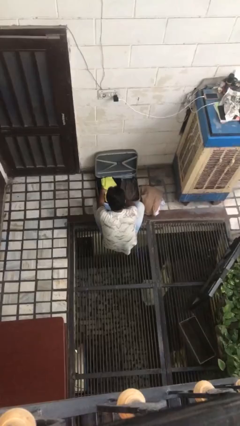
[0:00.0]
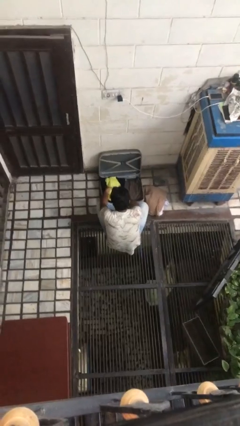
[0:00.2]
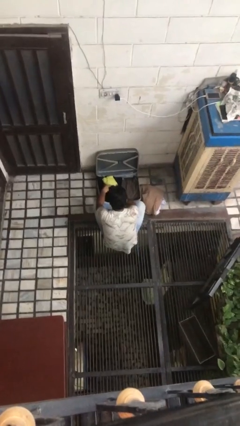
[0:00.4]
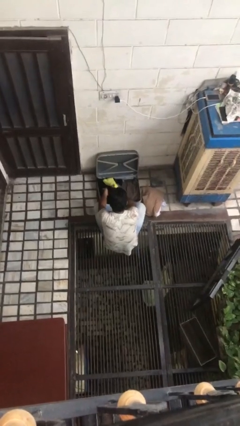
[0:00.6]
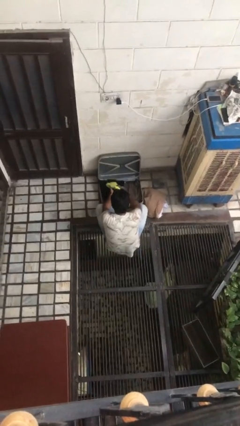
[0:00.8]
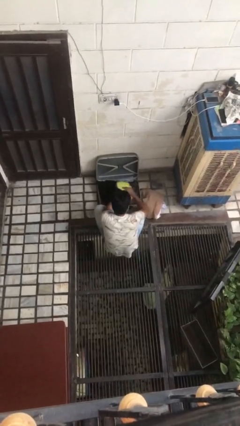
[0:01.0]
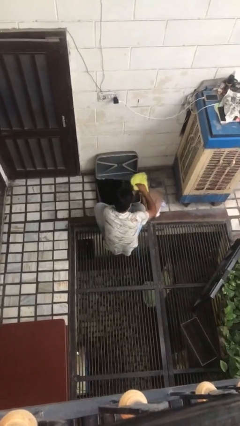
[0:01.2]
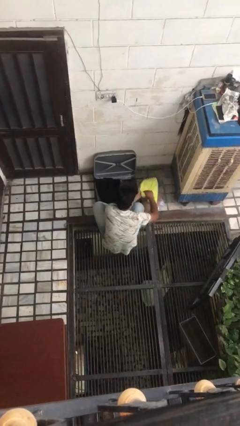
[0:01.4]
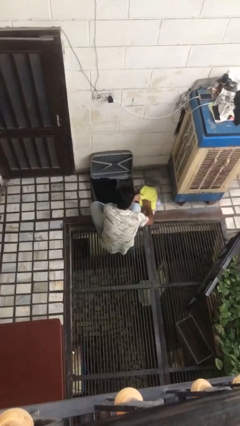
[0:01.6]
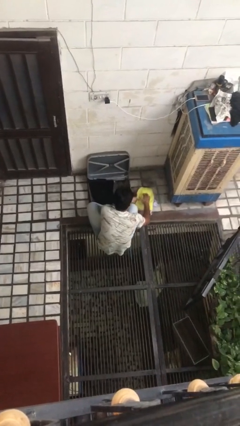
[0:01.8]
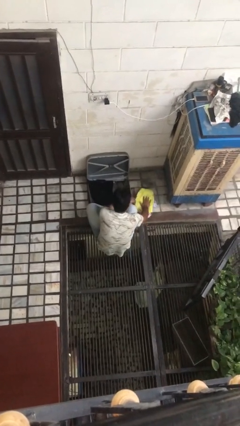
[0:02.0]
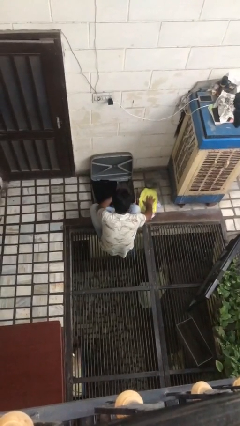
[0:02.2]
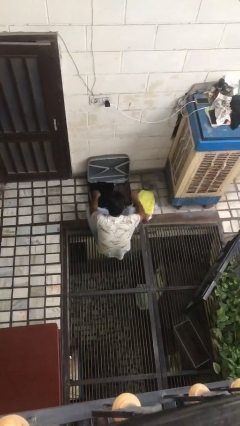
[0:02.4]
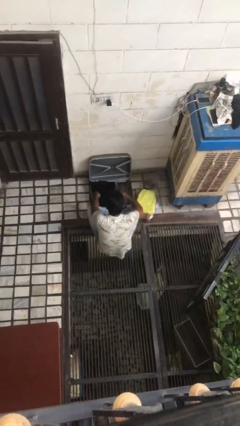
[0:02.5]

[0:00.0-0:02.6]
person unloads clothes from suitcase

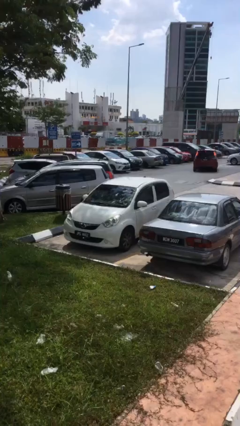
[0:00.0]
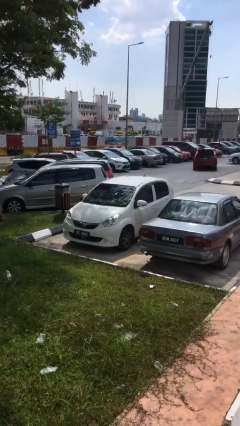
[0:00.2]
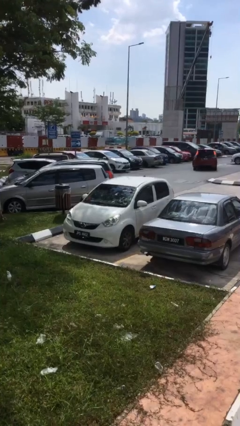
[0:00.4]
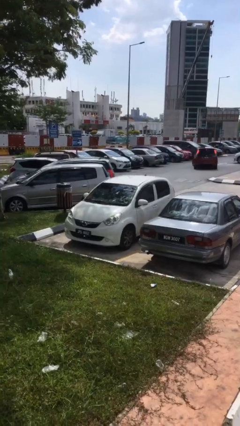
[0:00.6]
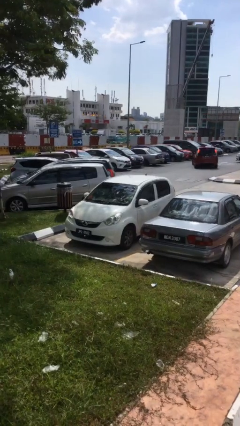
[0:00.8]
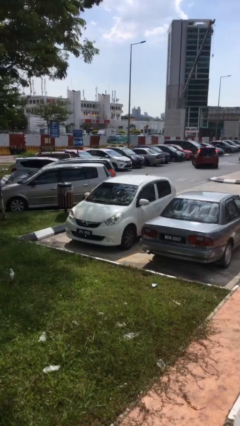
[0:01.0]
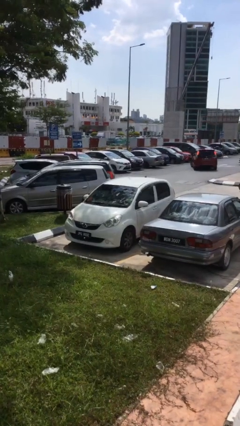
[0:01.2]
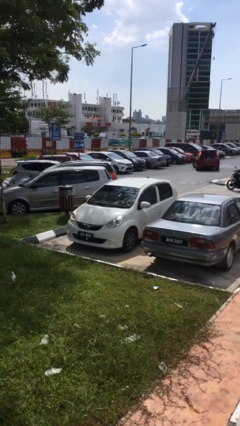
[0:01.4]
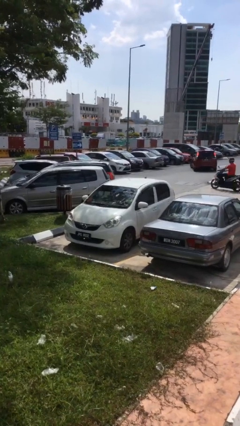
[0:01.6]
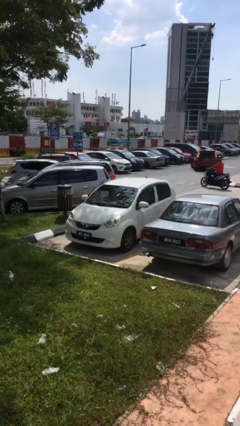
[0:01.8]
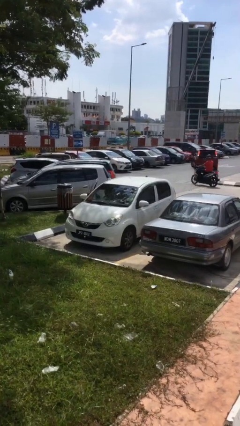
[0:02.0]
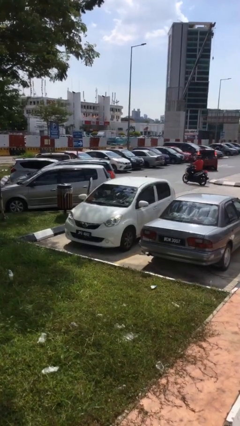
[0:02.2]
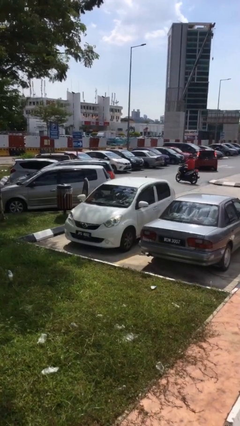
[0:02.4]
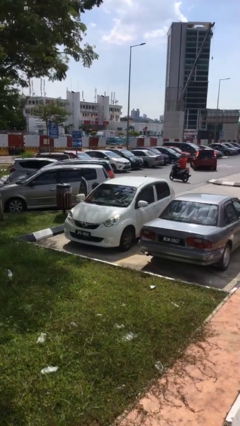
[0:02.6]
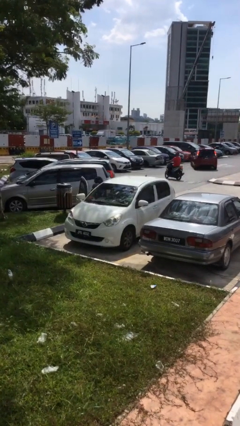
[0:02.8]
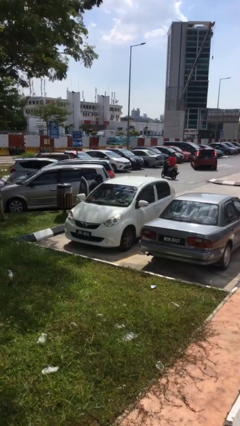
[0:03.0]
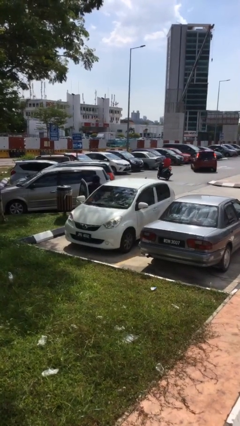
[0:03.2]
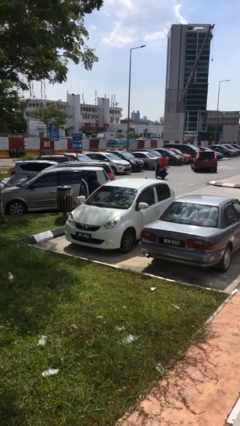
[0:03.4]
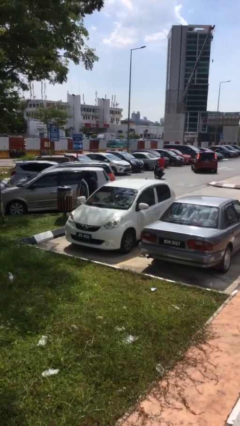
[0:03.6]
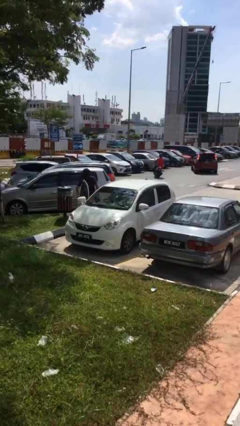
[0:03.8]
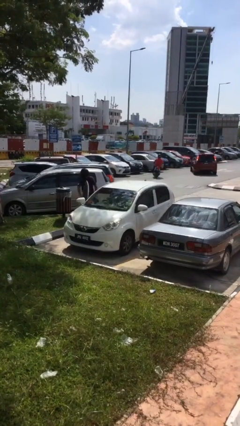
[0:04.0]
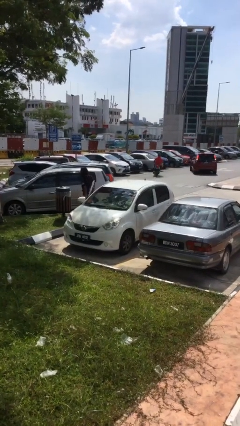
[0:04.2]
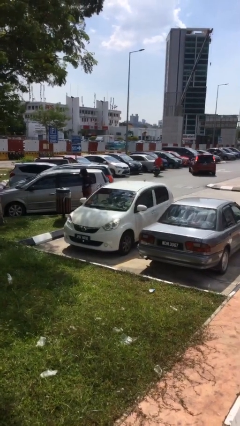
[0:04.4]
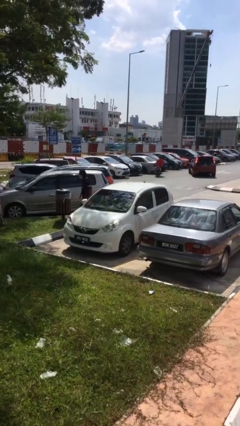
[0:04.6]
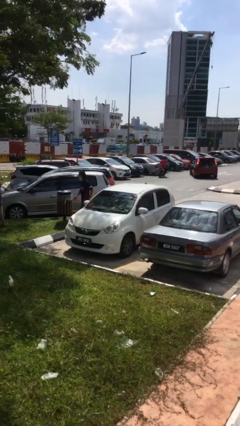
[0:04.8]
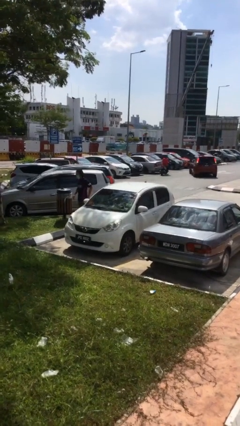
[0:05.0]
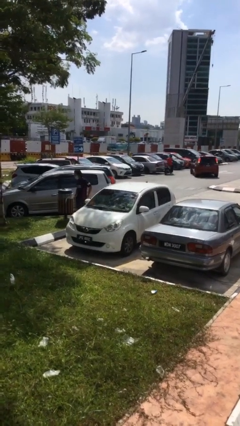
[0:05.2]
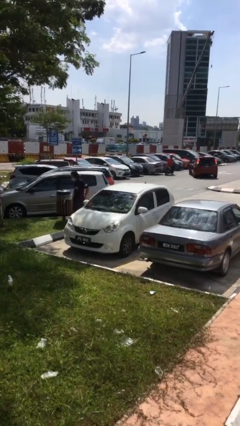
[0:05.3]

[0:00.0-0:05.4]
car drops off person

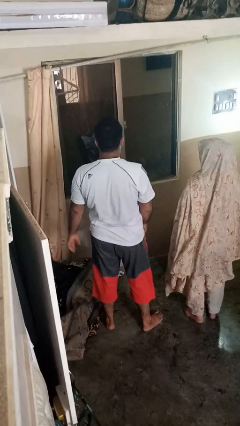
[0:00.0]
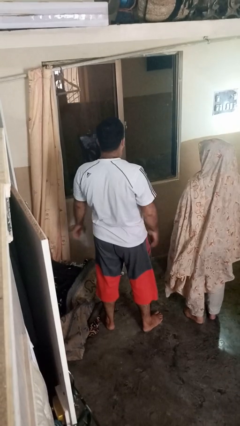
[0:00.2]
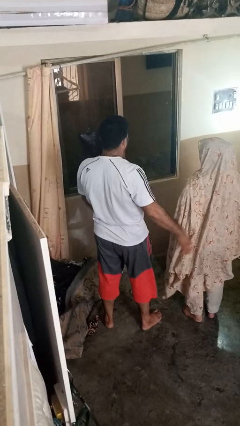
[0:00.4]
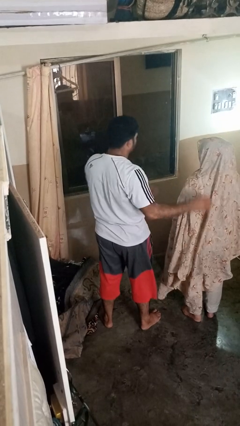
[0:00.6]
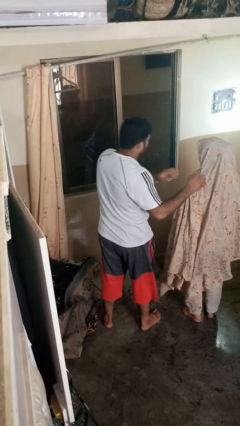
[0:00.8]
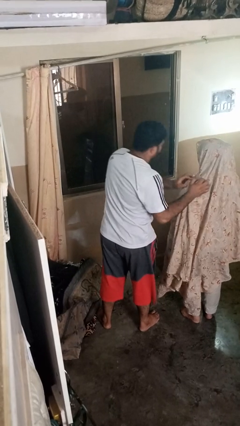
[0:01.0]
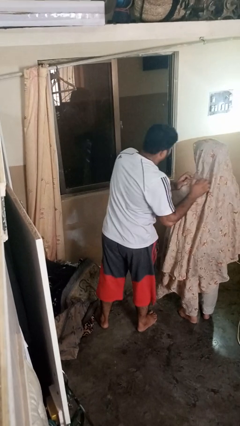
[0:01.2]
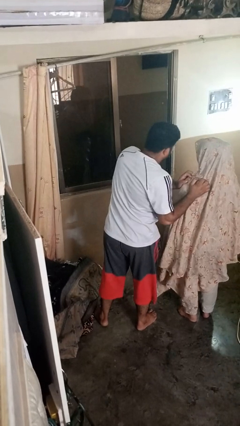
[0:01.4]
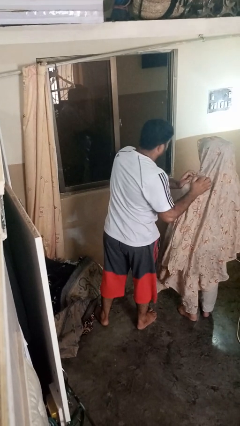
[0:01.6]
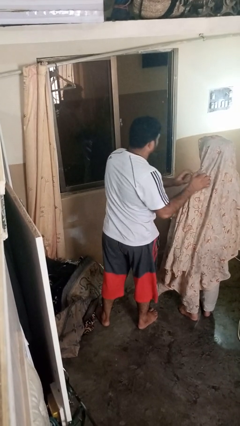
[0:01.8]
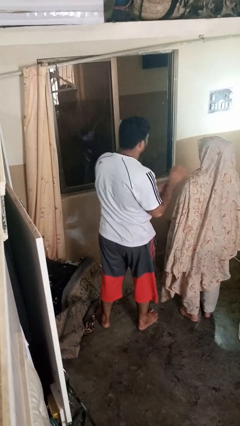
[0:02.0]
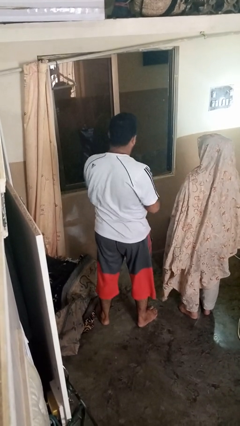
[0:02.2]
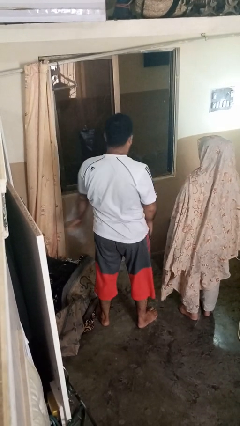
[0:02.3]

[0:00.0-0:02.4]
person shoves person

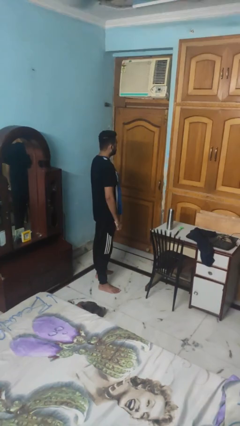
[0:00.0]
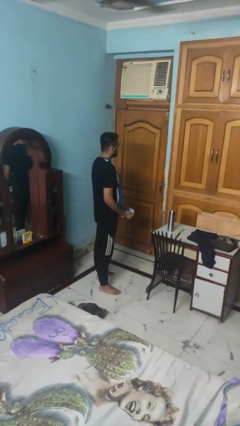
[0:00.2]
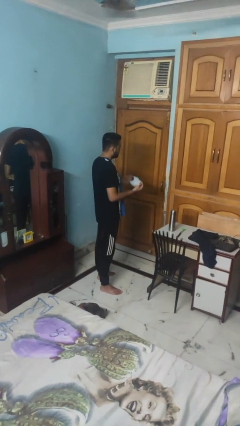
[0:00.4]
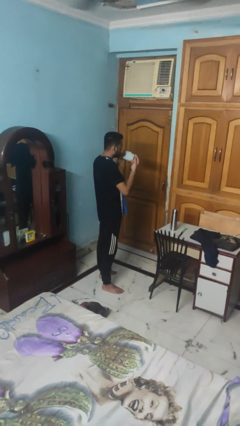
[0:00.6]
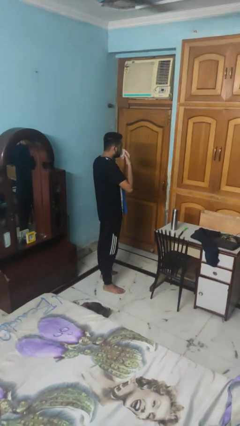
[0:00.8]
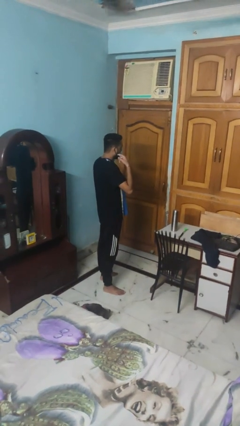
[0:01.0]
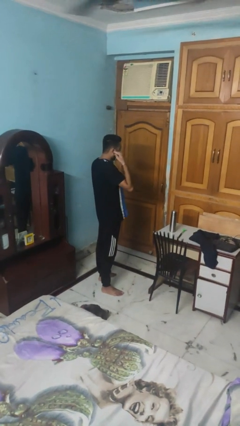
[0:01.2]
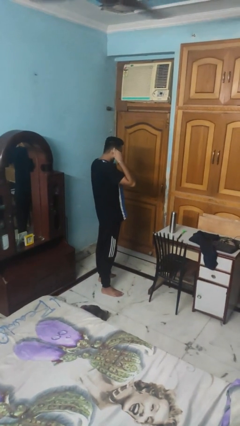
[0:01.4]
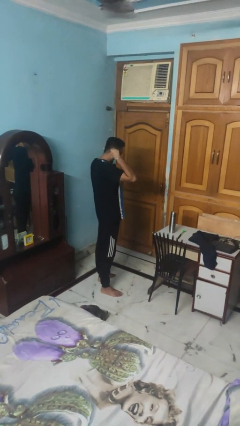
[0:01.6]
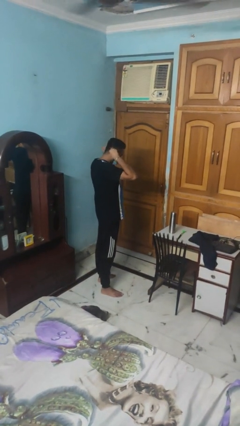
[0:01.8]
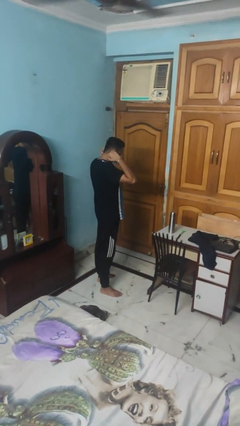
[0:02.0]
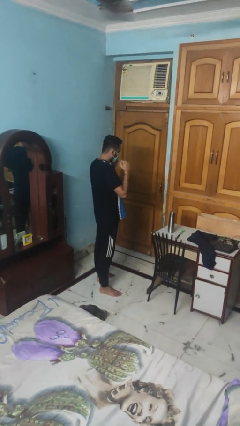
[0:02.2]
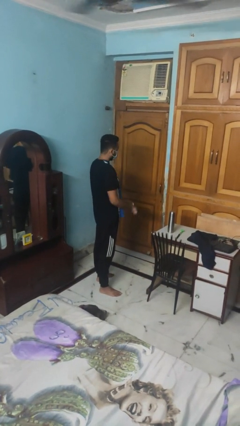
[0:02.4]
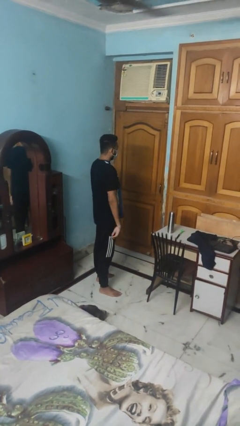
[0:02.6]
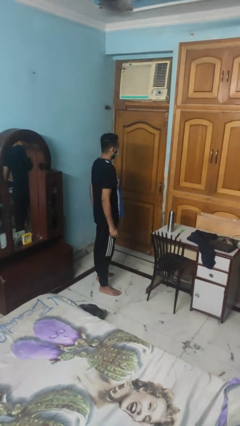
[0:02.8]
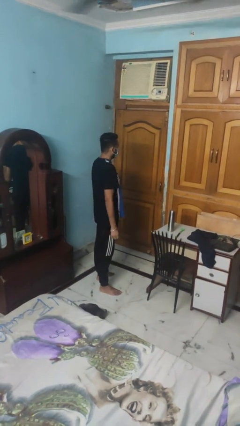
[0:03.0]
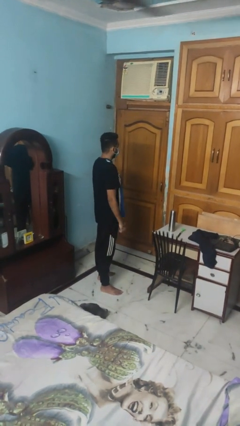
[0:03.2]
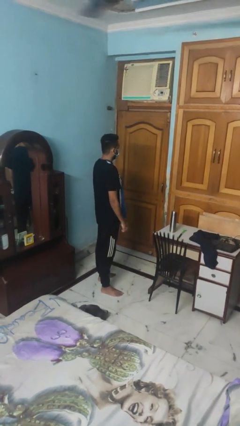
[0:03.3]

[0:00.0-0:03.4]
person puts on facemask

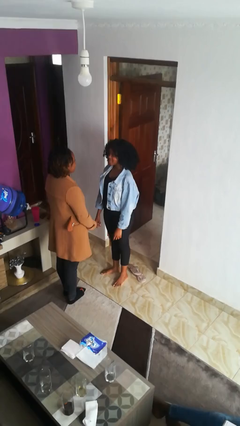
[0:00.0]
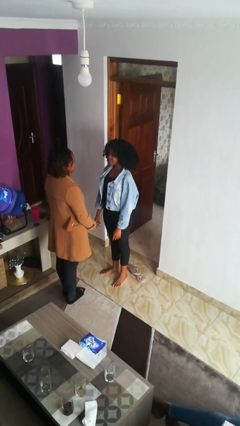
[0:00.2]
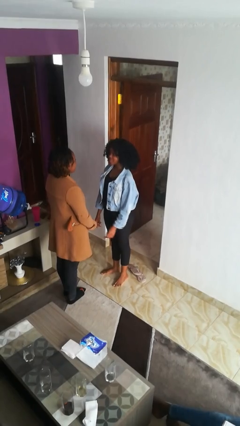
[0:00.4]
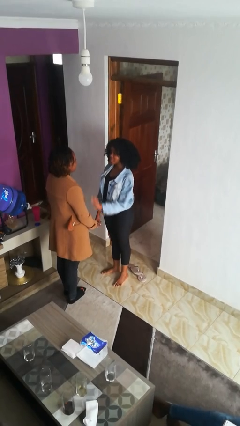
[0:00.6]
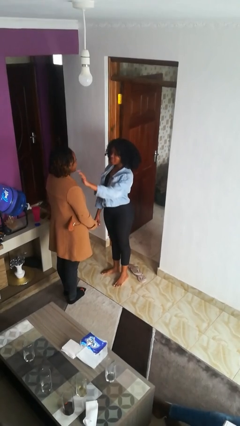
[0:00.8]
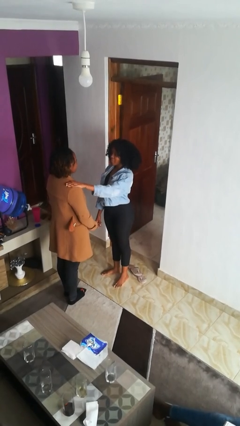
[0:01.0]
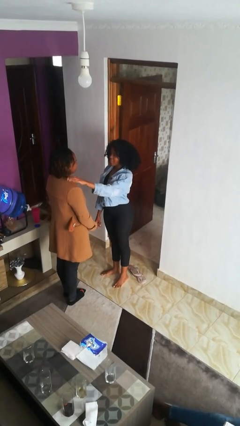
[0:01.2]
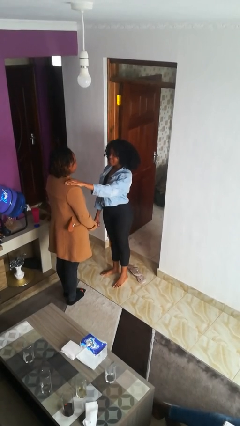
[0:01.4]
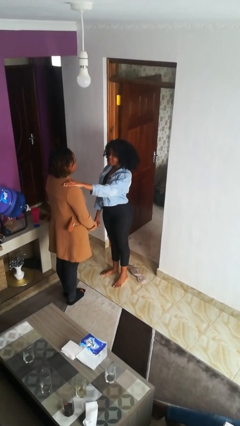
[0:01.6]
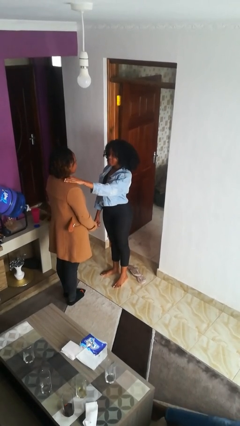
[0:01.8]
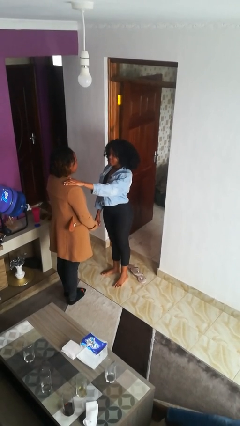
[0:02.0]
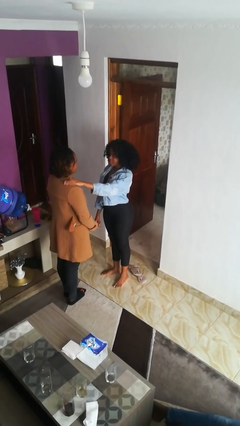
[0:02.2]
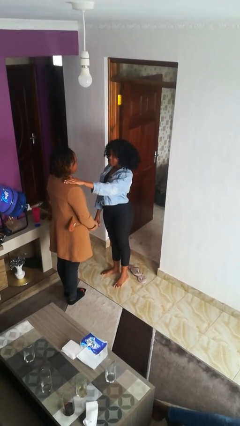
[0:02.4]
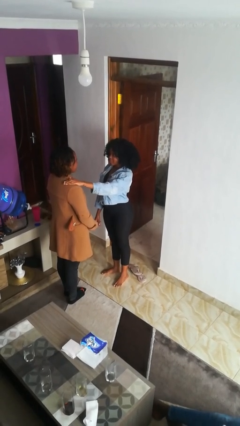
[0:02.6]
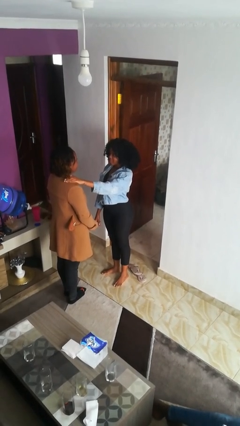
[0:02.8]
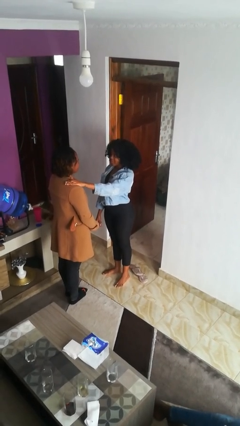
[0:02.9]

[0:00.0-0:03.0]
person pounds shoulders of person

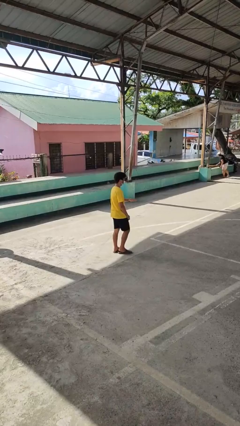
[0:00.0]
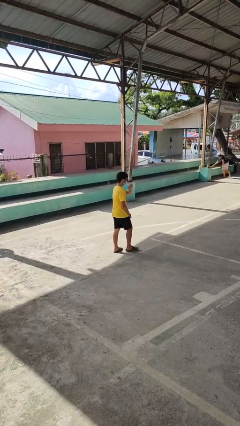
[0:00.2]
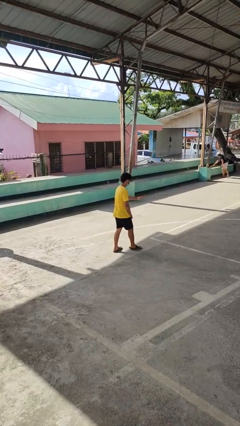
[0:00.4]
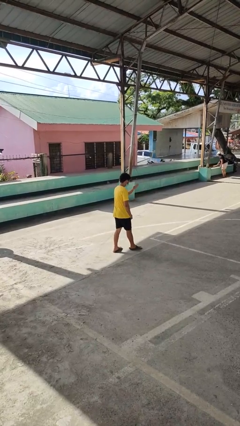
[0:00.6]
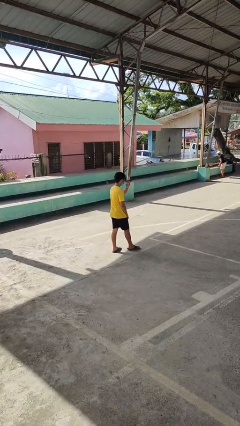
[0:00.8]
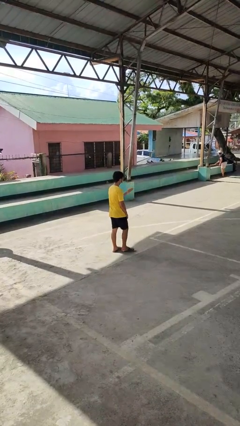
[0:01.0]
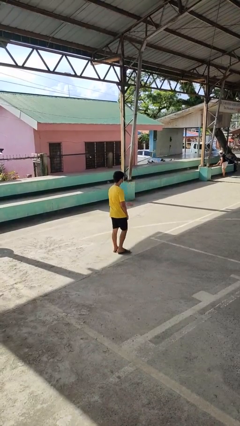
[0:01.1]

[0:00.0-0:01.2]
person karate chop
